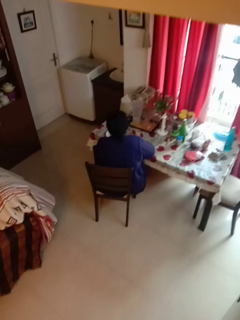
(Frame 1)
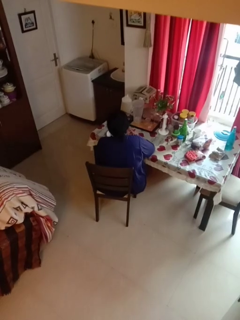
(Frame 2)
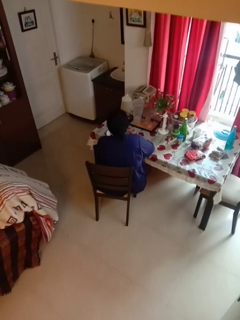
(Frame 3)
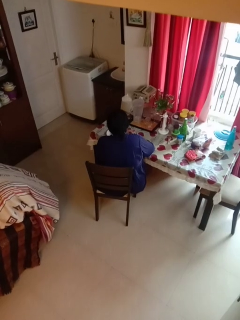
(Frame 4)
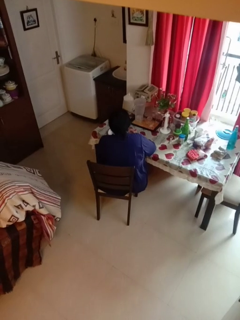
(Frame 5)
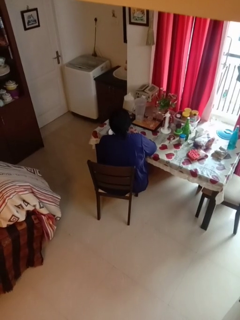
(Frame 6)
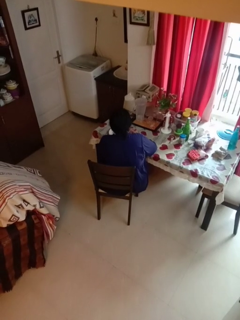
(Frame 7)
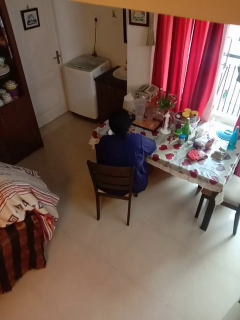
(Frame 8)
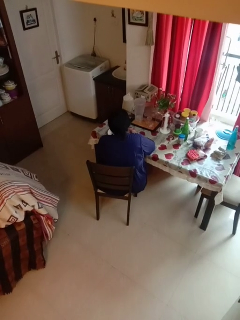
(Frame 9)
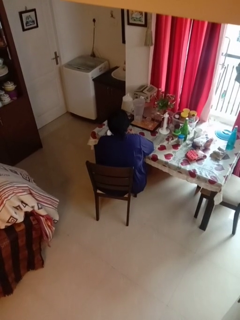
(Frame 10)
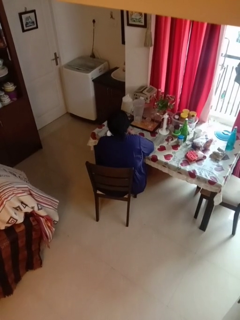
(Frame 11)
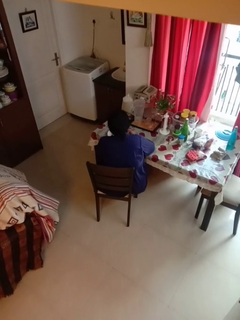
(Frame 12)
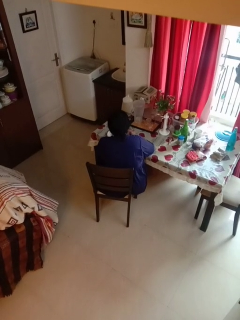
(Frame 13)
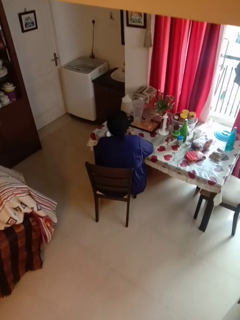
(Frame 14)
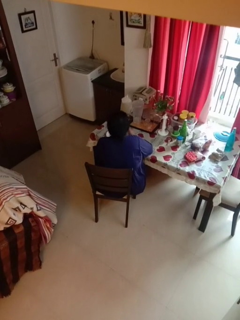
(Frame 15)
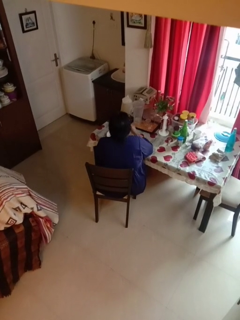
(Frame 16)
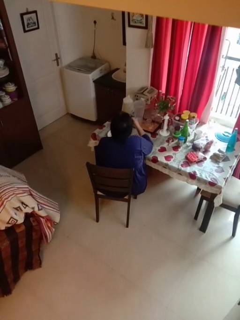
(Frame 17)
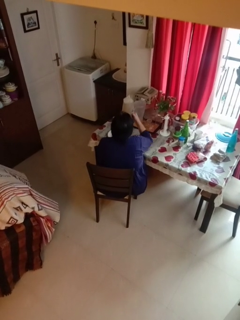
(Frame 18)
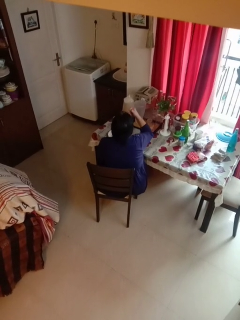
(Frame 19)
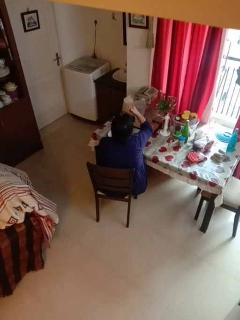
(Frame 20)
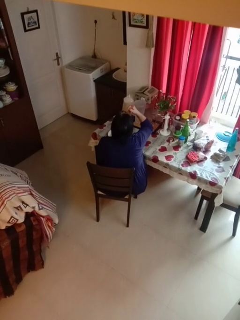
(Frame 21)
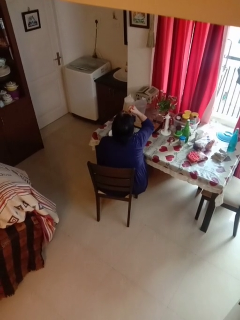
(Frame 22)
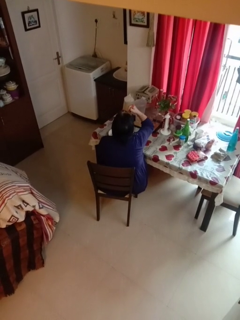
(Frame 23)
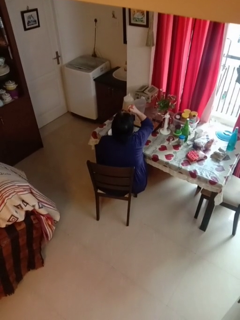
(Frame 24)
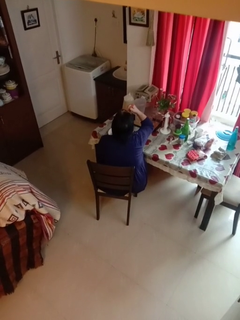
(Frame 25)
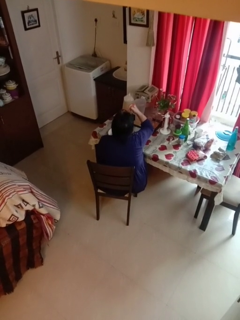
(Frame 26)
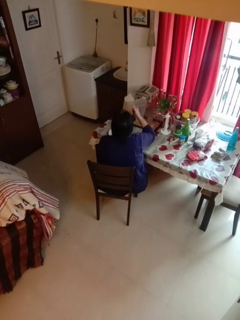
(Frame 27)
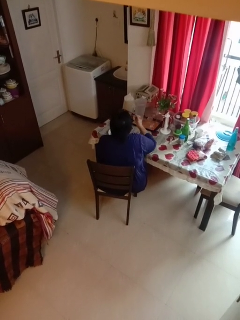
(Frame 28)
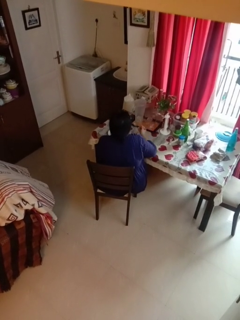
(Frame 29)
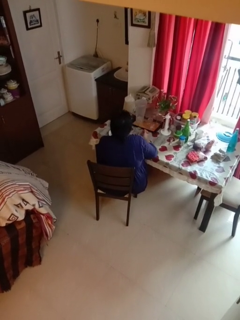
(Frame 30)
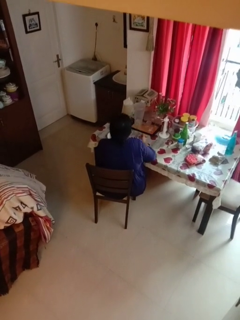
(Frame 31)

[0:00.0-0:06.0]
person eats with utensil

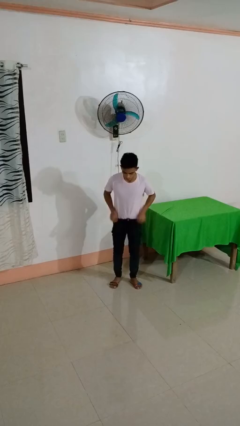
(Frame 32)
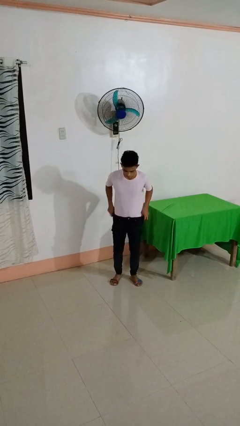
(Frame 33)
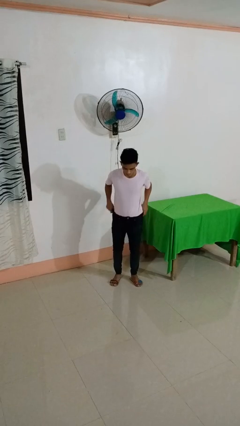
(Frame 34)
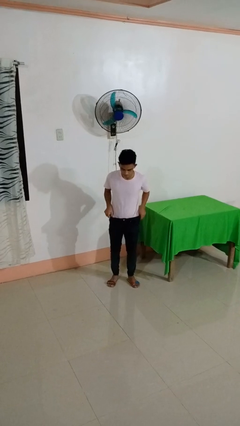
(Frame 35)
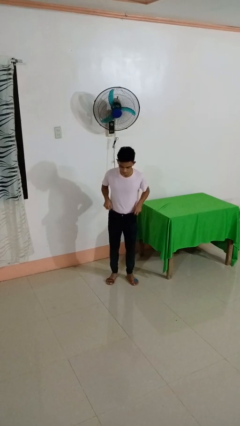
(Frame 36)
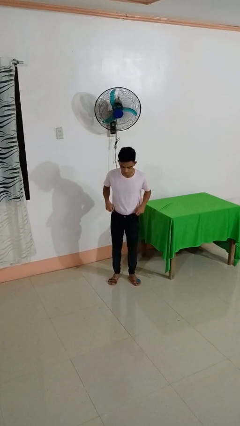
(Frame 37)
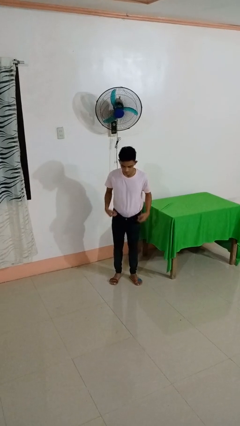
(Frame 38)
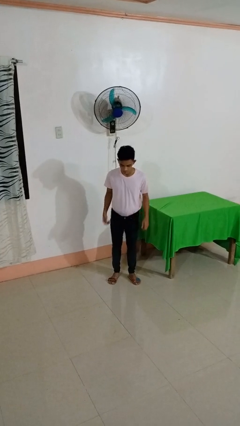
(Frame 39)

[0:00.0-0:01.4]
person hikes up pants

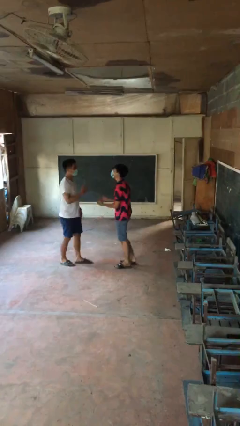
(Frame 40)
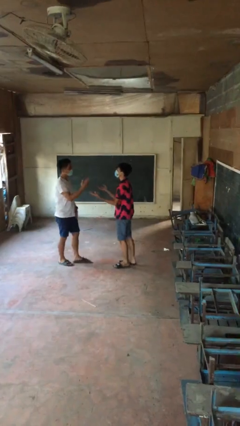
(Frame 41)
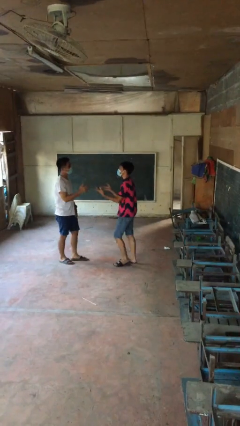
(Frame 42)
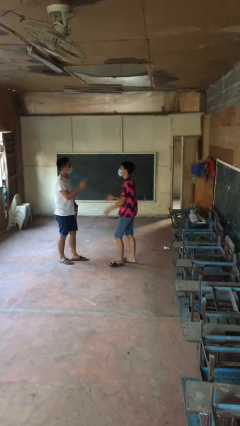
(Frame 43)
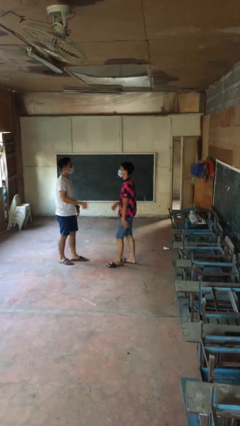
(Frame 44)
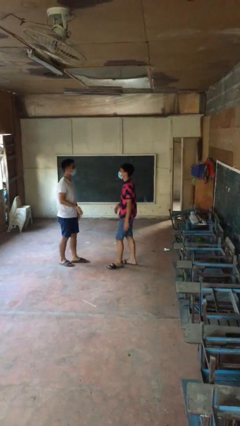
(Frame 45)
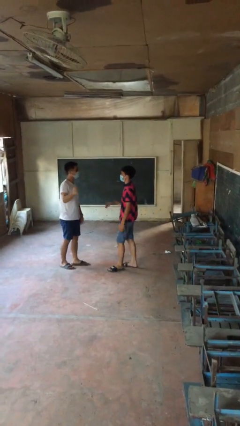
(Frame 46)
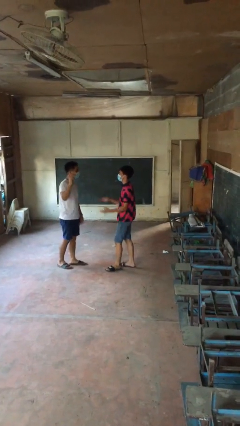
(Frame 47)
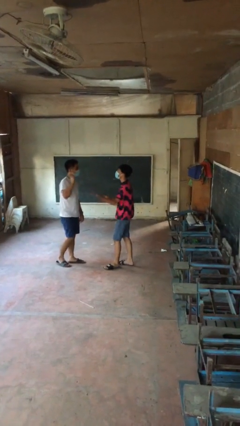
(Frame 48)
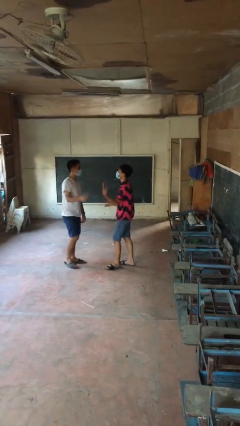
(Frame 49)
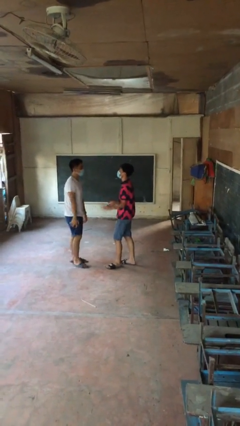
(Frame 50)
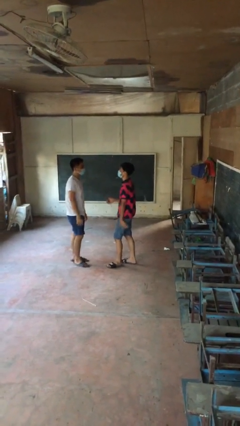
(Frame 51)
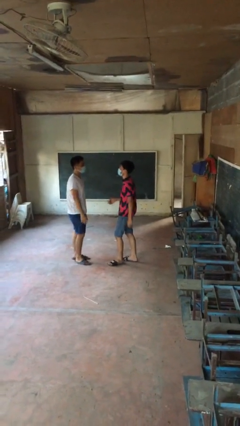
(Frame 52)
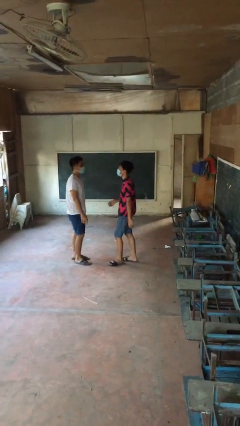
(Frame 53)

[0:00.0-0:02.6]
person talks to person

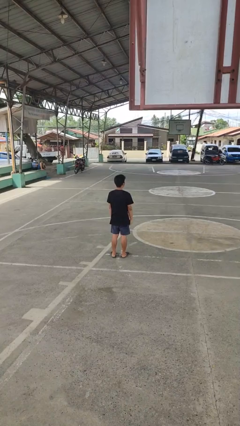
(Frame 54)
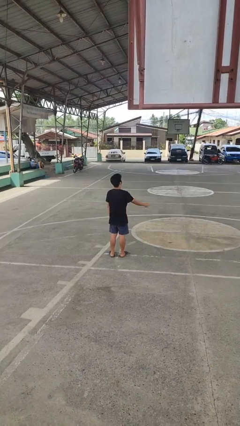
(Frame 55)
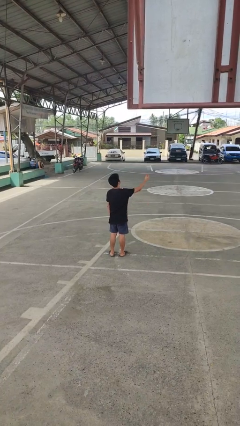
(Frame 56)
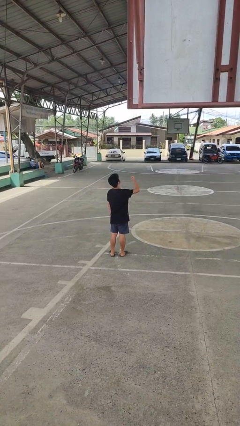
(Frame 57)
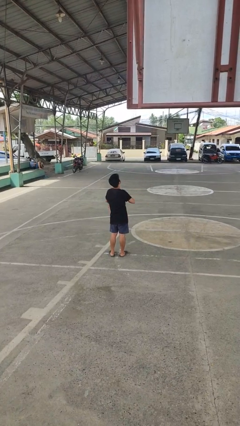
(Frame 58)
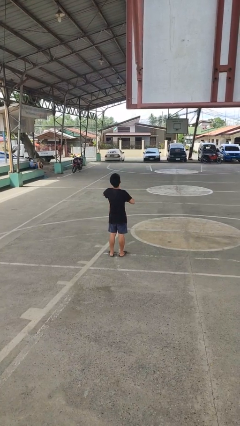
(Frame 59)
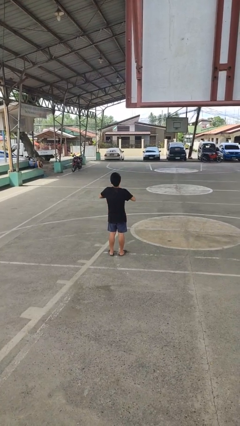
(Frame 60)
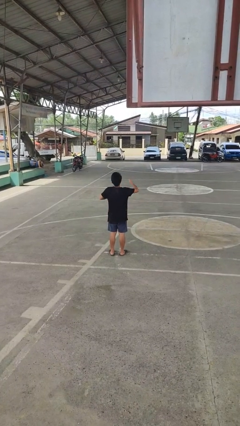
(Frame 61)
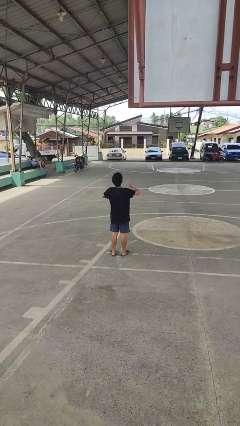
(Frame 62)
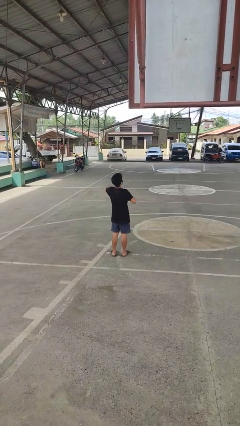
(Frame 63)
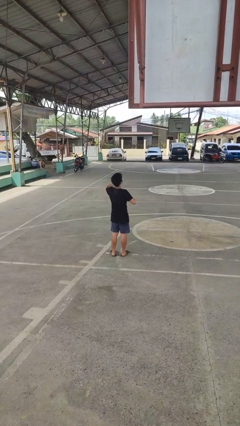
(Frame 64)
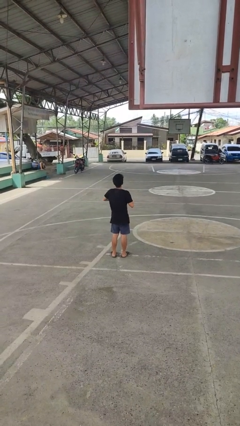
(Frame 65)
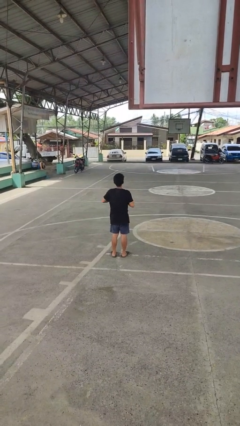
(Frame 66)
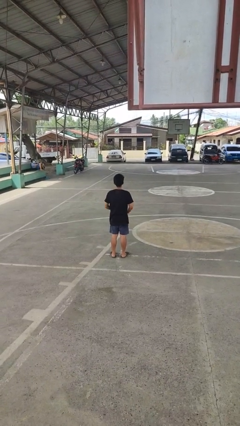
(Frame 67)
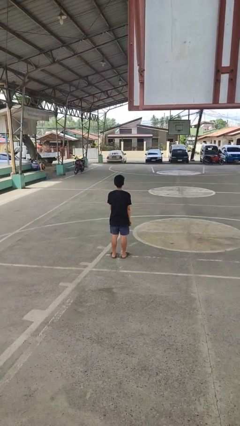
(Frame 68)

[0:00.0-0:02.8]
person drums on chest

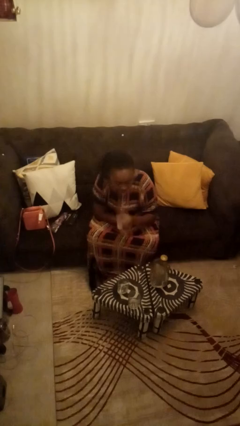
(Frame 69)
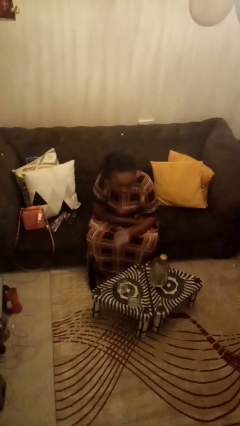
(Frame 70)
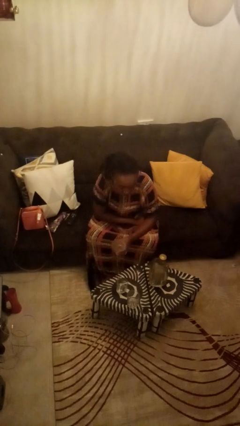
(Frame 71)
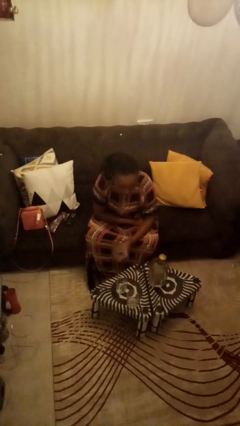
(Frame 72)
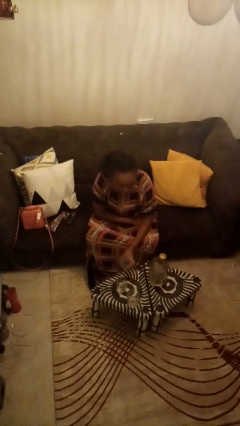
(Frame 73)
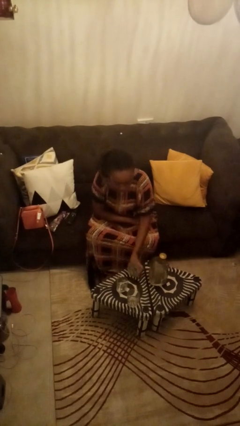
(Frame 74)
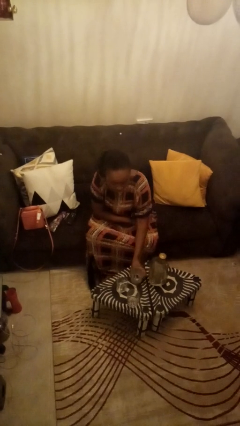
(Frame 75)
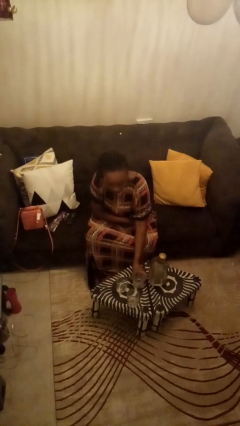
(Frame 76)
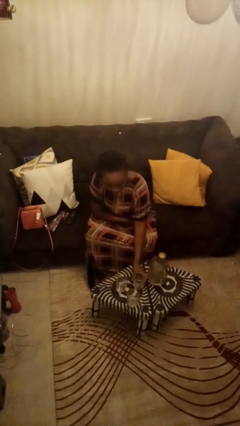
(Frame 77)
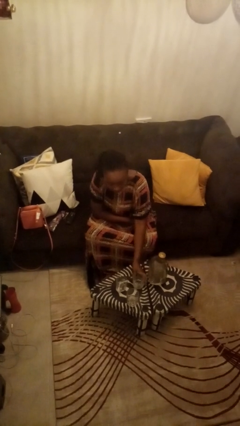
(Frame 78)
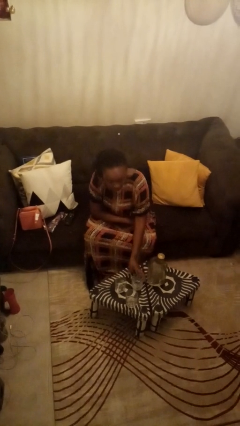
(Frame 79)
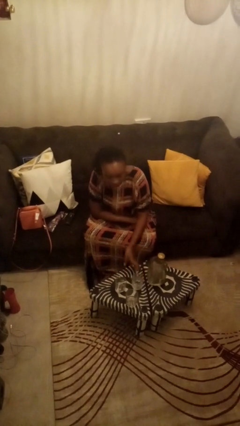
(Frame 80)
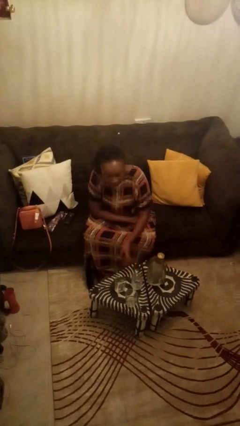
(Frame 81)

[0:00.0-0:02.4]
person puts down object on table

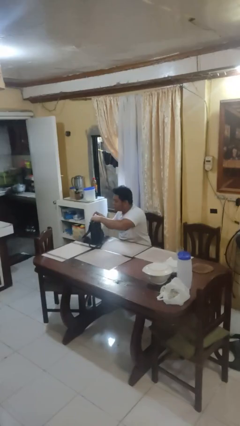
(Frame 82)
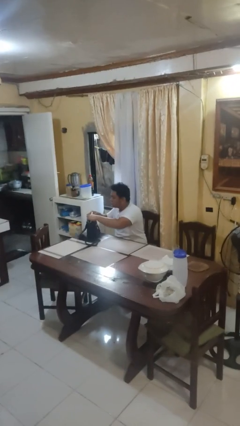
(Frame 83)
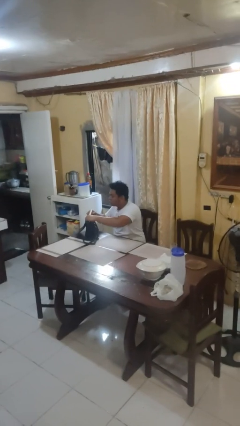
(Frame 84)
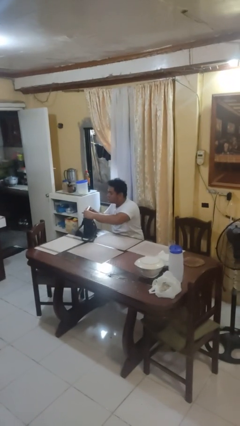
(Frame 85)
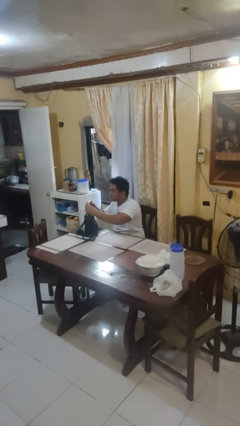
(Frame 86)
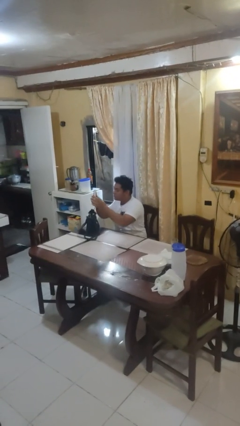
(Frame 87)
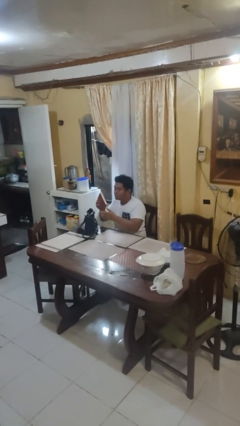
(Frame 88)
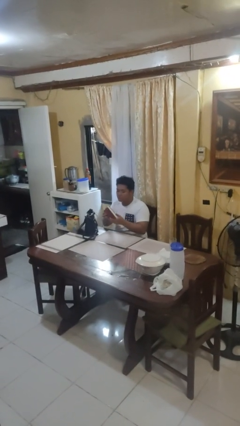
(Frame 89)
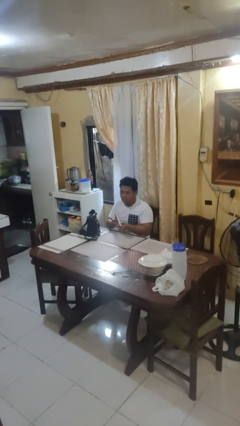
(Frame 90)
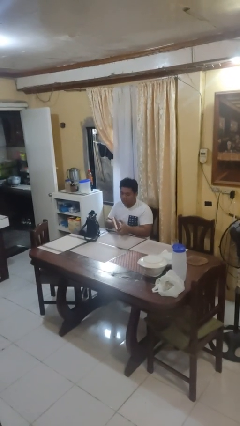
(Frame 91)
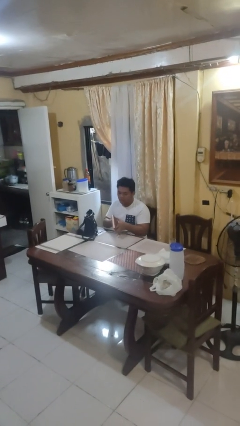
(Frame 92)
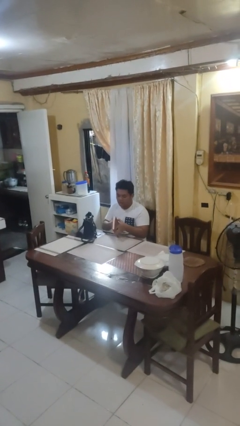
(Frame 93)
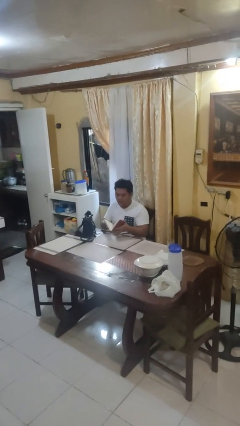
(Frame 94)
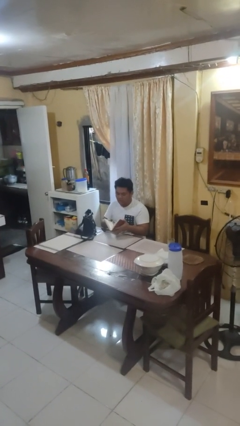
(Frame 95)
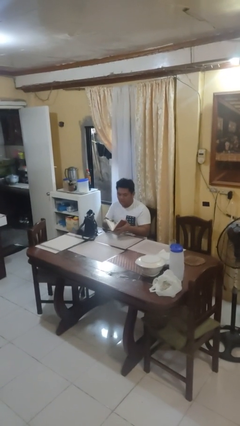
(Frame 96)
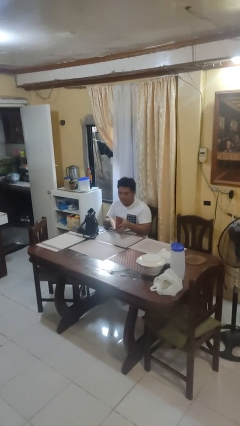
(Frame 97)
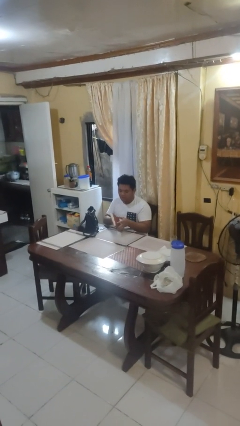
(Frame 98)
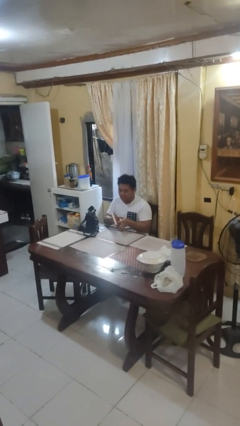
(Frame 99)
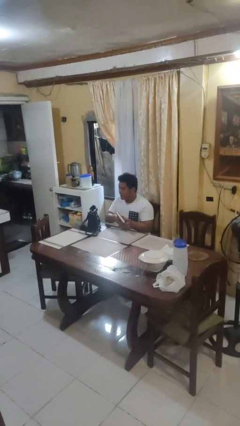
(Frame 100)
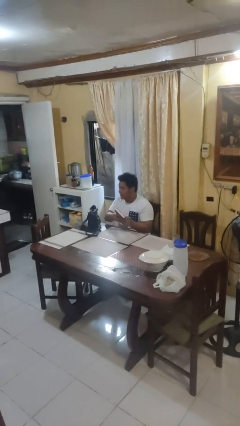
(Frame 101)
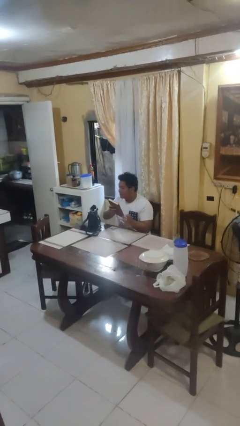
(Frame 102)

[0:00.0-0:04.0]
person takes object from purse
